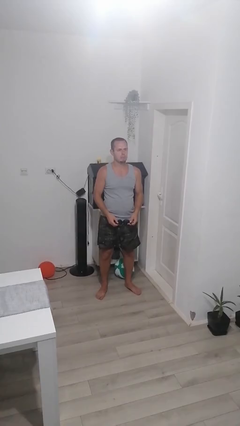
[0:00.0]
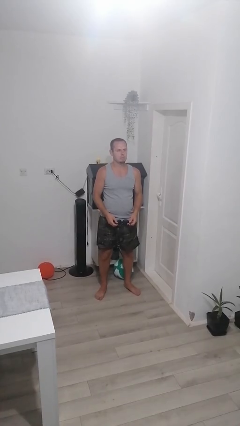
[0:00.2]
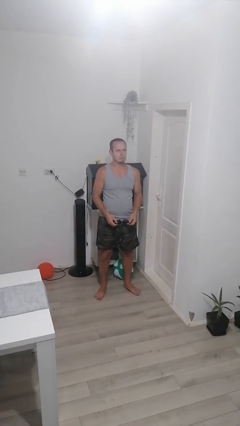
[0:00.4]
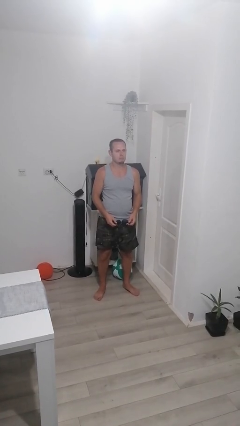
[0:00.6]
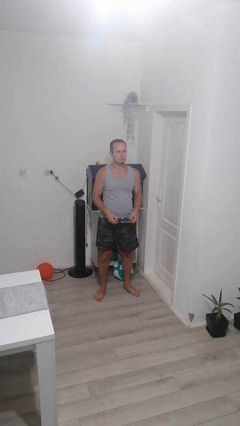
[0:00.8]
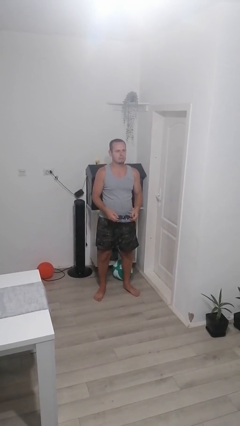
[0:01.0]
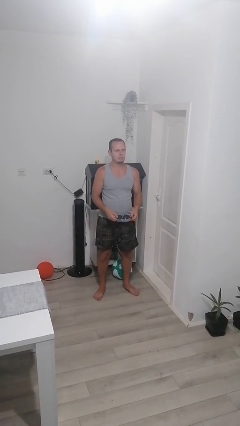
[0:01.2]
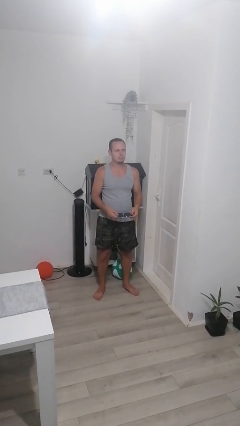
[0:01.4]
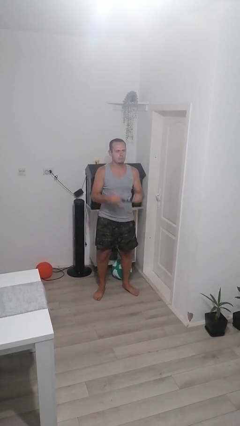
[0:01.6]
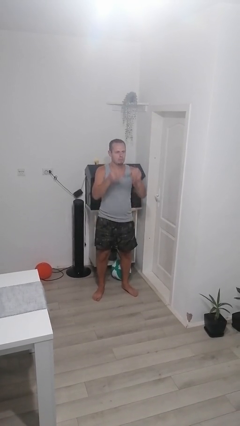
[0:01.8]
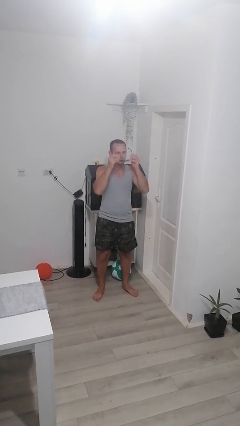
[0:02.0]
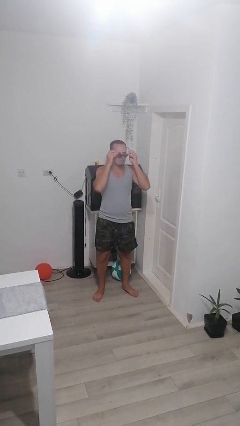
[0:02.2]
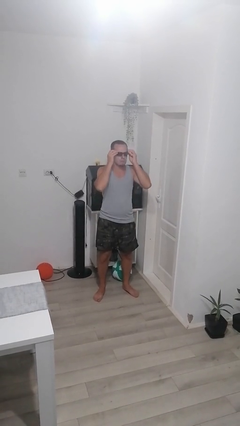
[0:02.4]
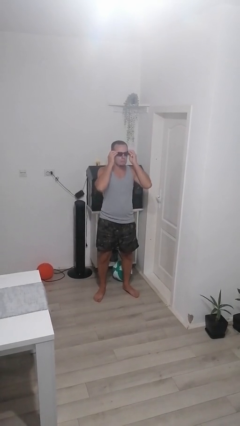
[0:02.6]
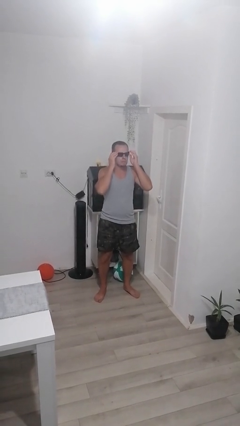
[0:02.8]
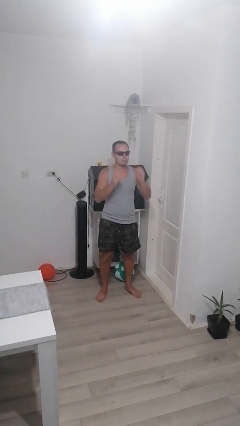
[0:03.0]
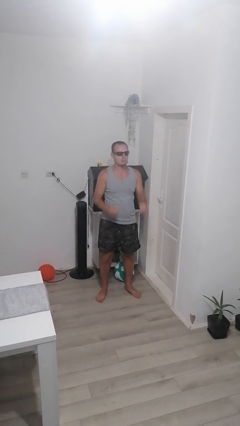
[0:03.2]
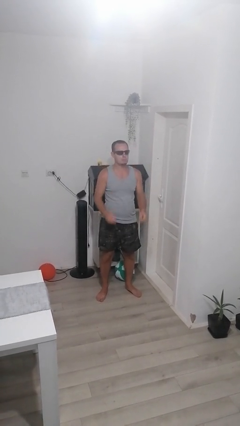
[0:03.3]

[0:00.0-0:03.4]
person puts on sunglasses

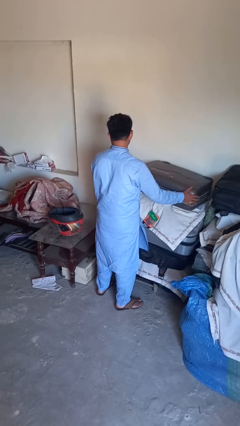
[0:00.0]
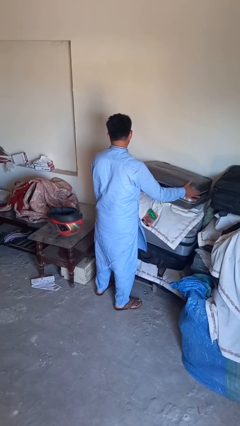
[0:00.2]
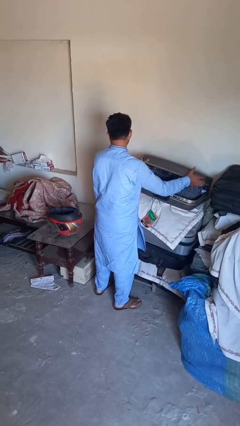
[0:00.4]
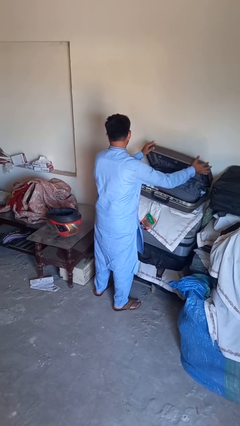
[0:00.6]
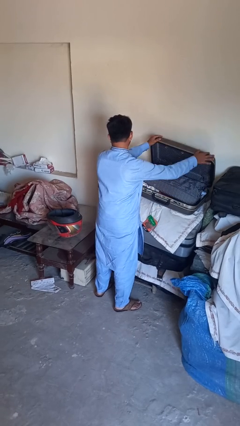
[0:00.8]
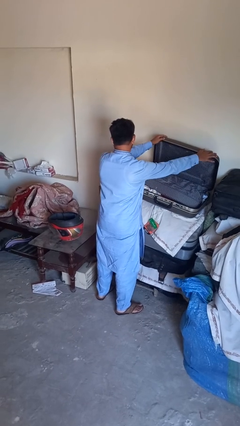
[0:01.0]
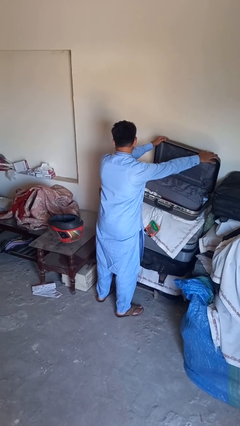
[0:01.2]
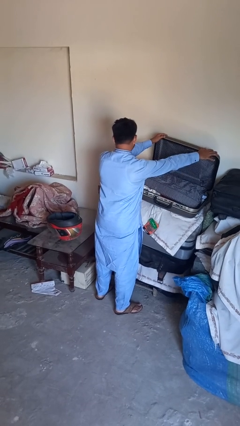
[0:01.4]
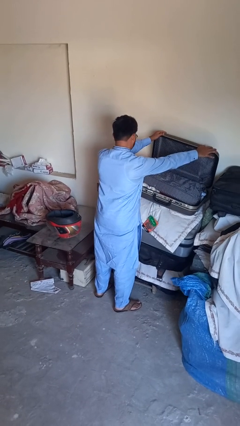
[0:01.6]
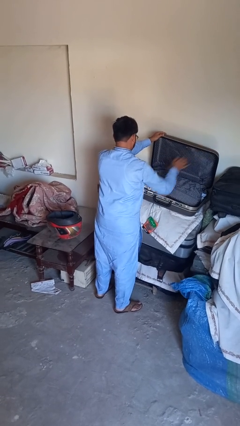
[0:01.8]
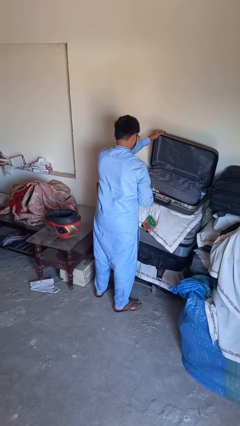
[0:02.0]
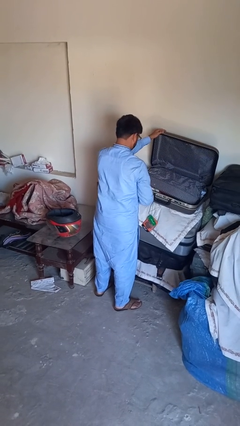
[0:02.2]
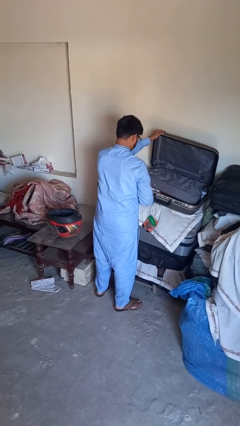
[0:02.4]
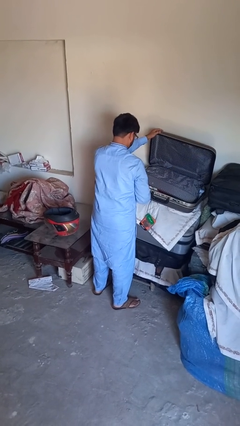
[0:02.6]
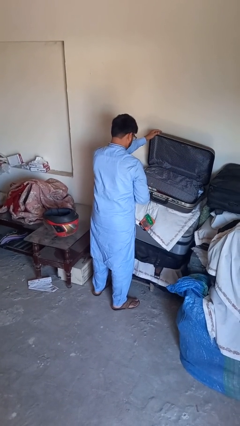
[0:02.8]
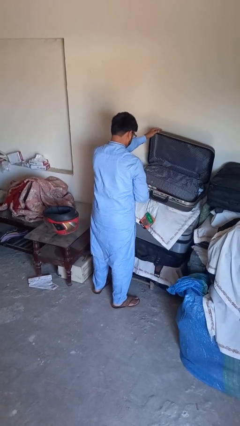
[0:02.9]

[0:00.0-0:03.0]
person opens suitcase

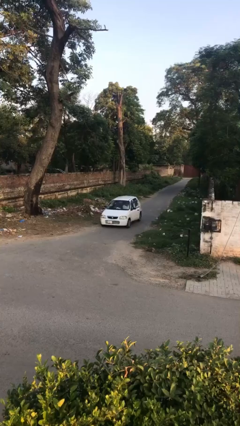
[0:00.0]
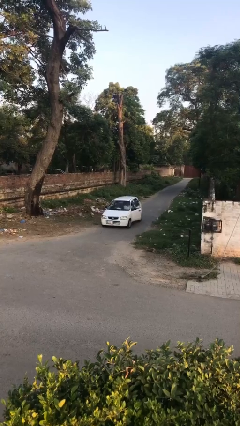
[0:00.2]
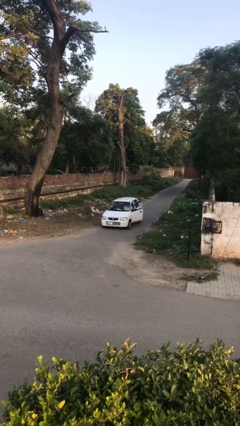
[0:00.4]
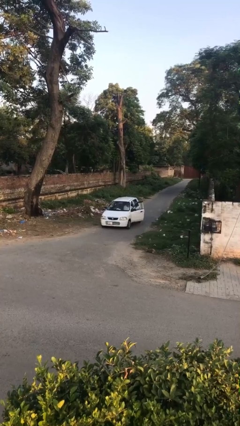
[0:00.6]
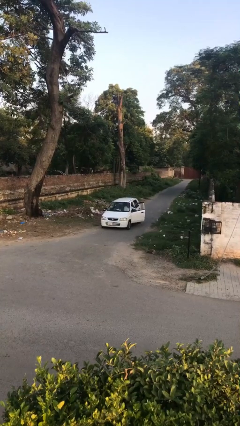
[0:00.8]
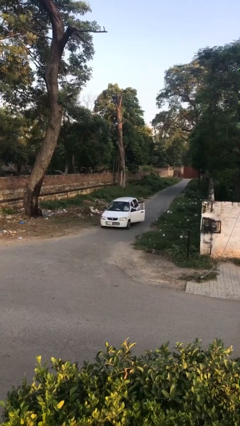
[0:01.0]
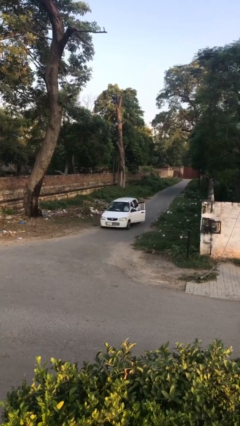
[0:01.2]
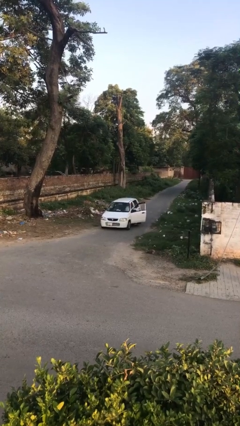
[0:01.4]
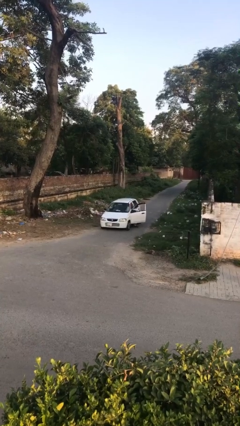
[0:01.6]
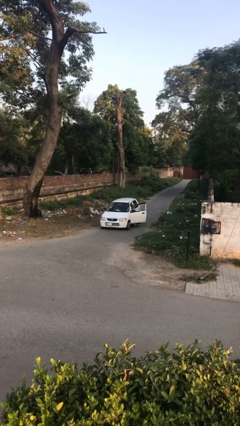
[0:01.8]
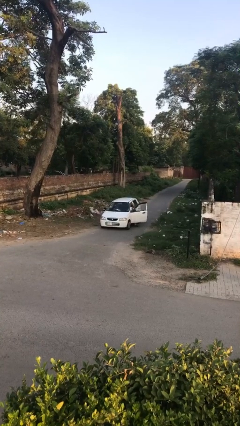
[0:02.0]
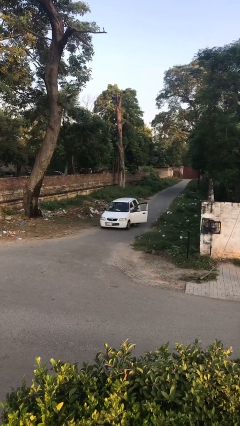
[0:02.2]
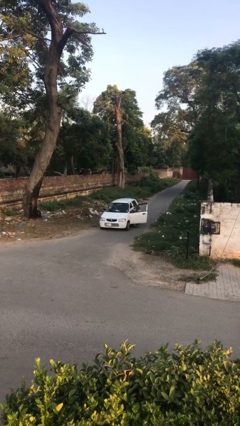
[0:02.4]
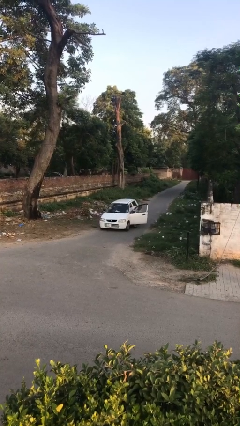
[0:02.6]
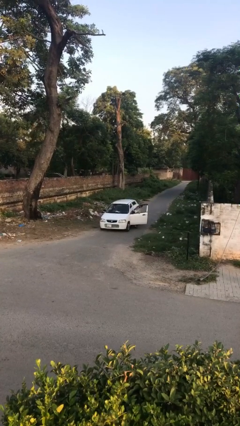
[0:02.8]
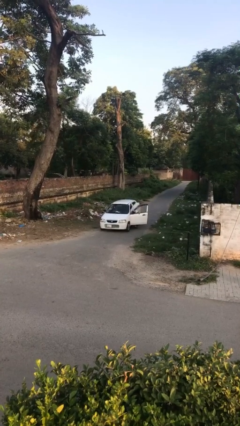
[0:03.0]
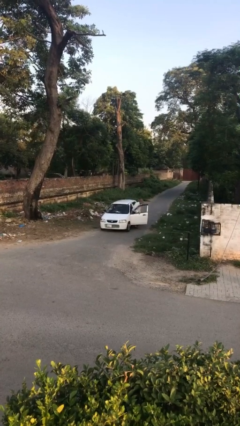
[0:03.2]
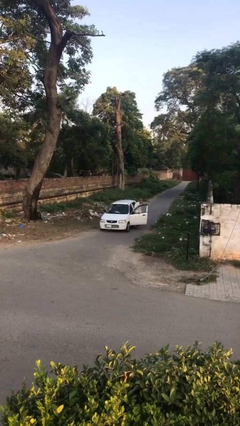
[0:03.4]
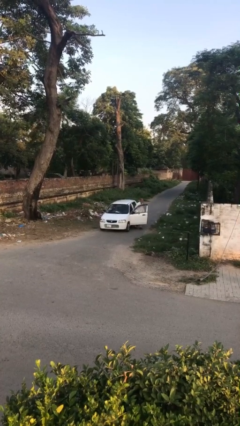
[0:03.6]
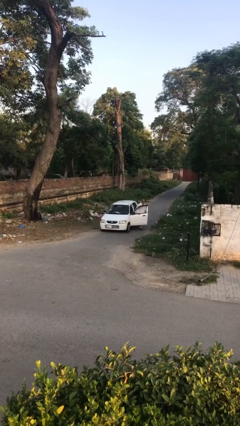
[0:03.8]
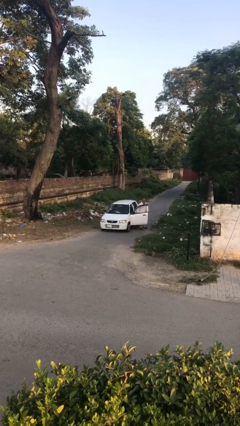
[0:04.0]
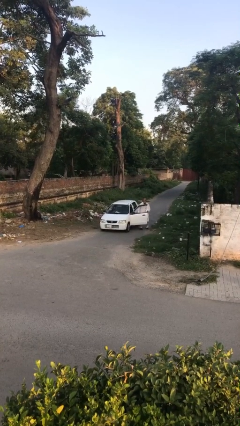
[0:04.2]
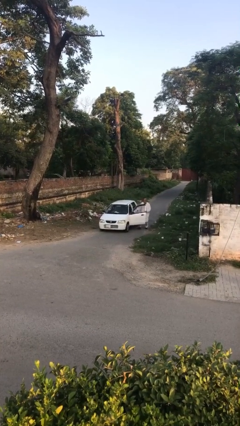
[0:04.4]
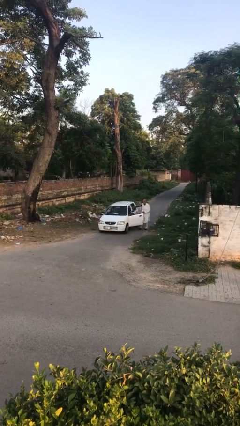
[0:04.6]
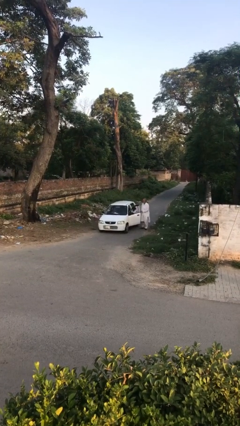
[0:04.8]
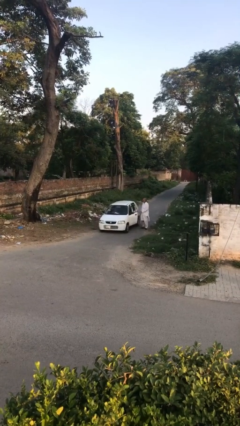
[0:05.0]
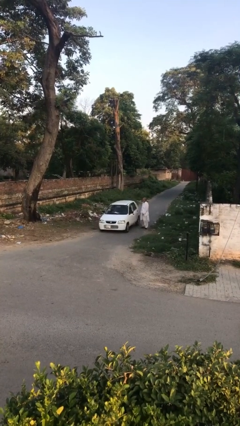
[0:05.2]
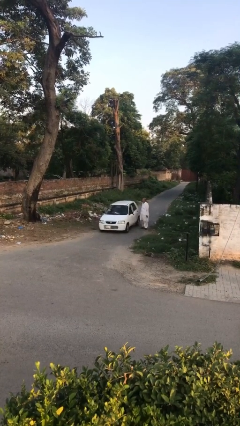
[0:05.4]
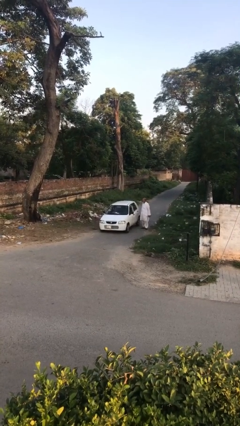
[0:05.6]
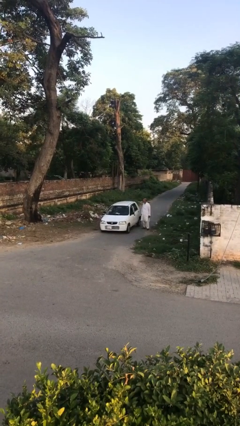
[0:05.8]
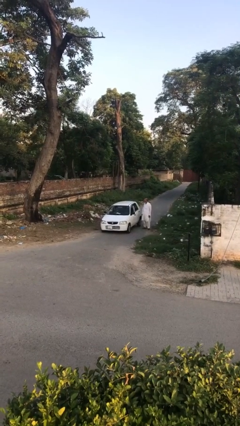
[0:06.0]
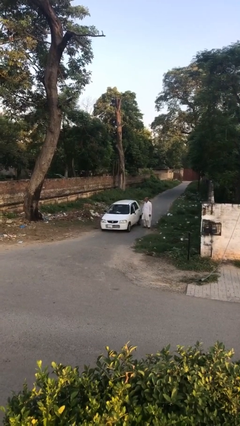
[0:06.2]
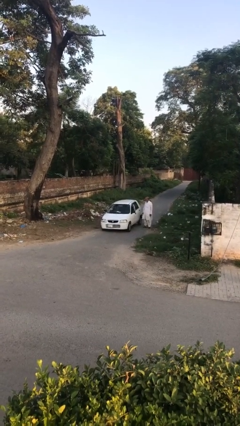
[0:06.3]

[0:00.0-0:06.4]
car drops off person

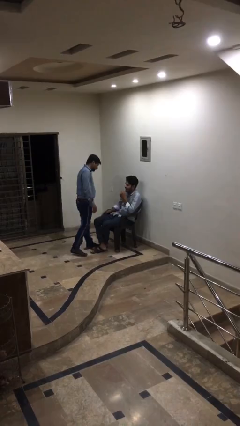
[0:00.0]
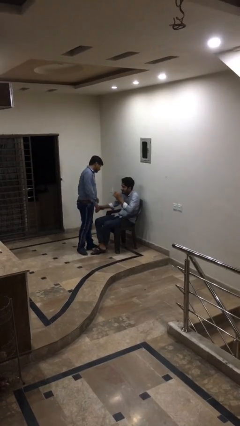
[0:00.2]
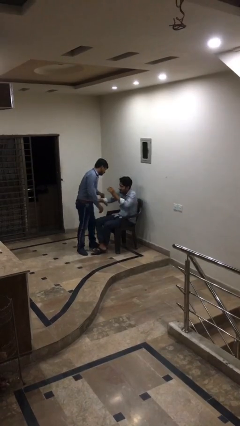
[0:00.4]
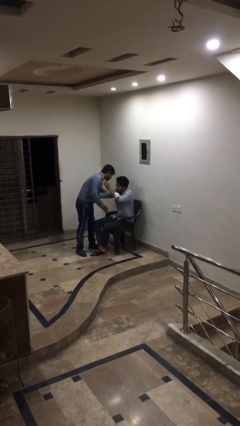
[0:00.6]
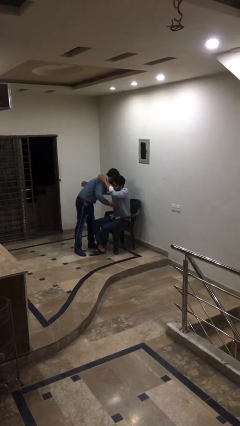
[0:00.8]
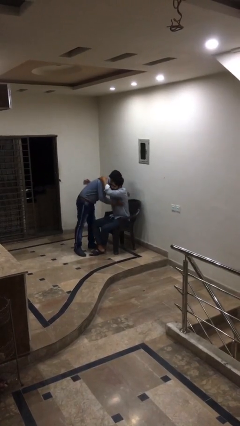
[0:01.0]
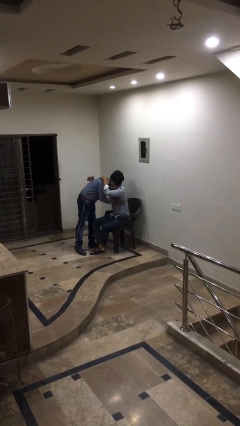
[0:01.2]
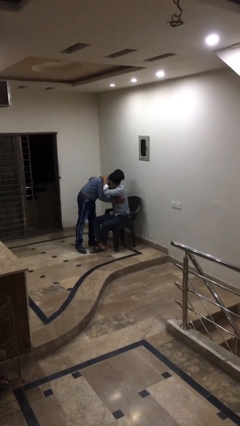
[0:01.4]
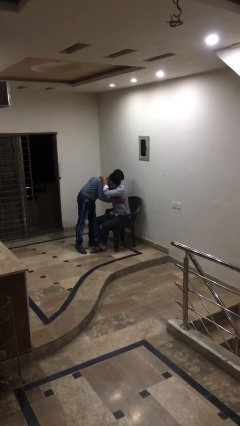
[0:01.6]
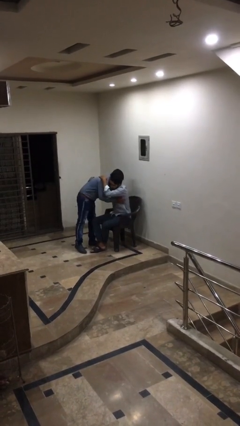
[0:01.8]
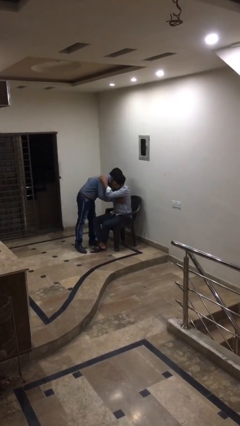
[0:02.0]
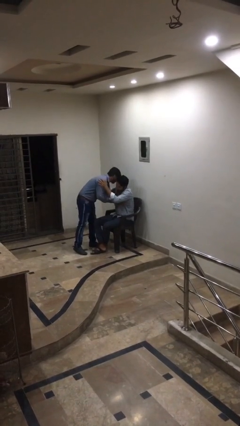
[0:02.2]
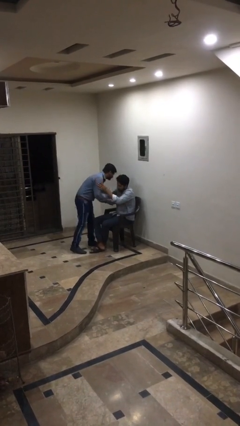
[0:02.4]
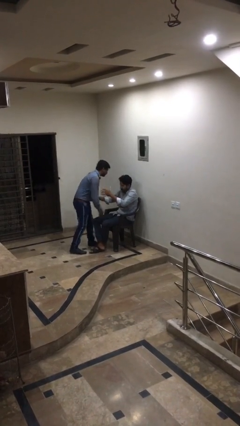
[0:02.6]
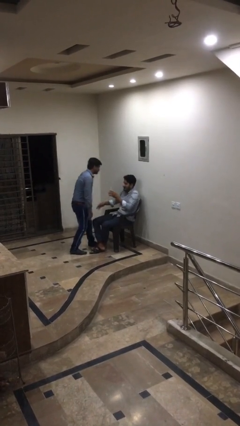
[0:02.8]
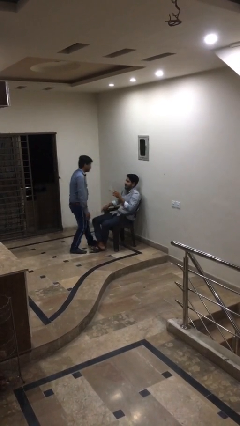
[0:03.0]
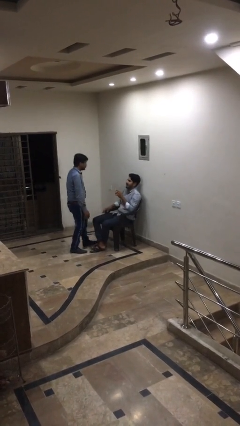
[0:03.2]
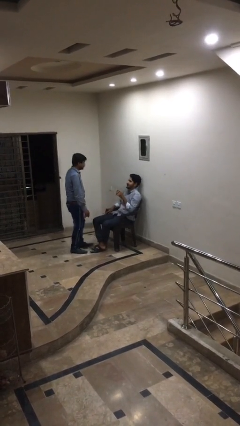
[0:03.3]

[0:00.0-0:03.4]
person embraces person

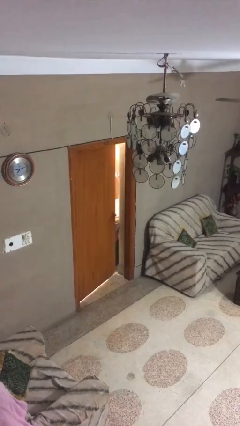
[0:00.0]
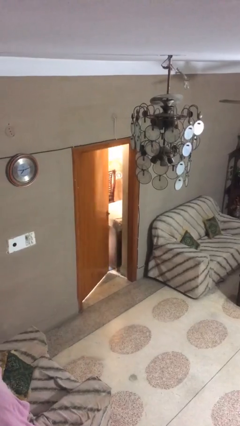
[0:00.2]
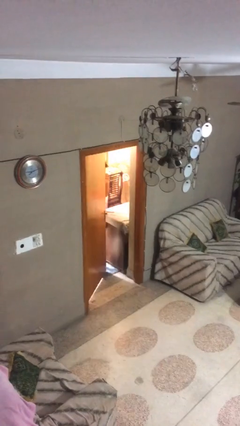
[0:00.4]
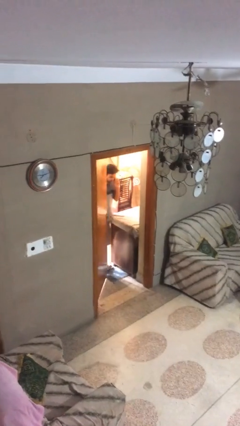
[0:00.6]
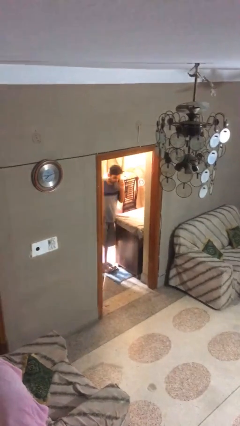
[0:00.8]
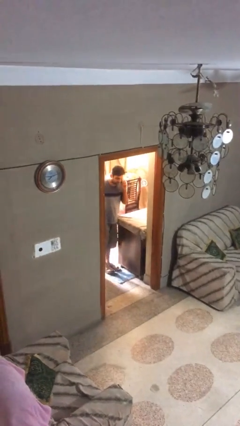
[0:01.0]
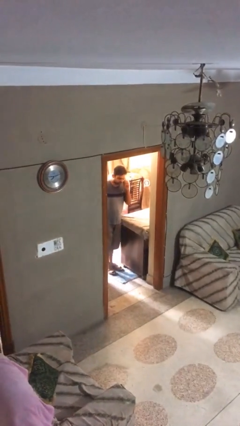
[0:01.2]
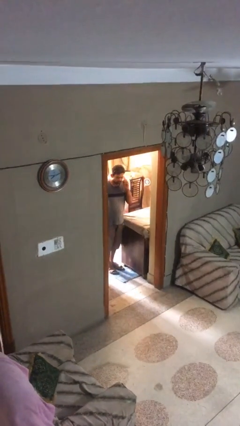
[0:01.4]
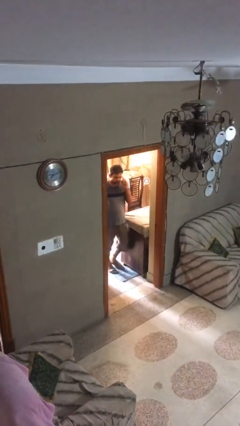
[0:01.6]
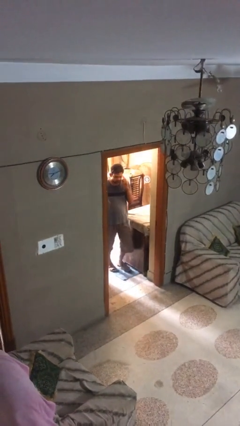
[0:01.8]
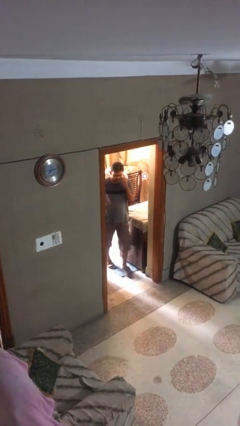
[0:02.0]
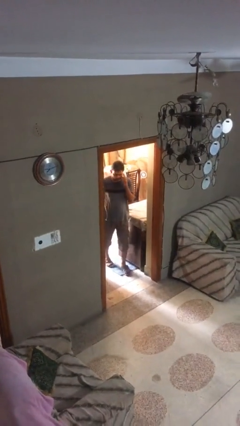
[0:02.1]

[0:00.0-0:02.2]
person opens facility door
